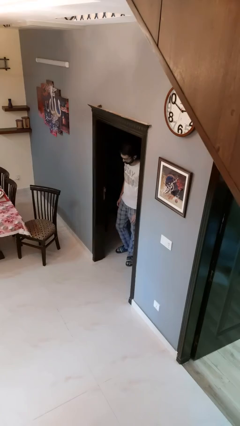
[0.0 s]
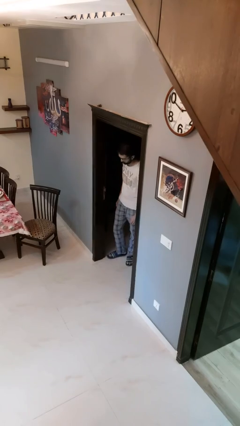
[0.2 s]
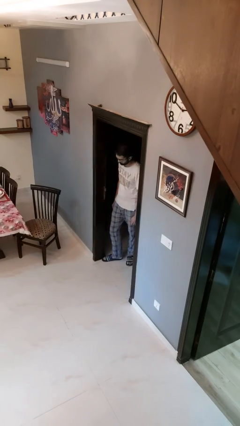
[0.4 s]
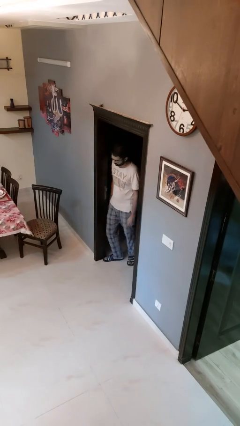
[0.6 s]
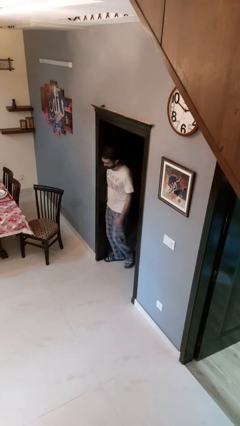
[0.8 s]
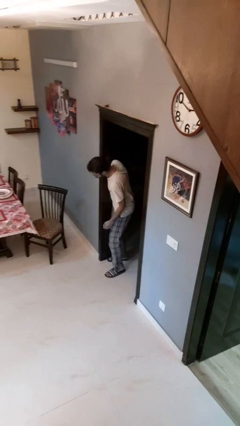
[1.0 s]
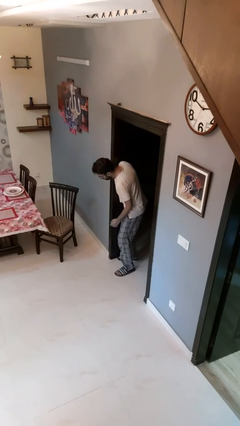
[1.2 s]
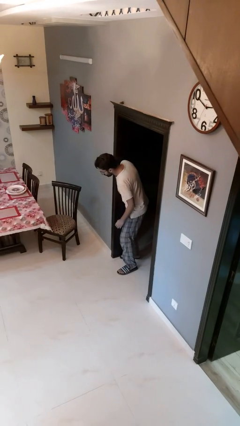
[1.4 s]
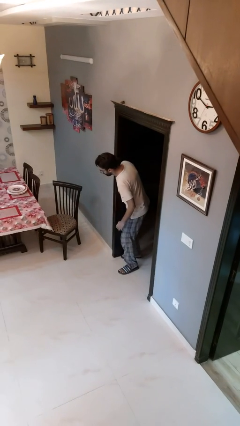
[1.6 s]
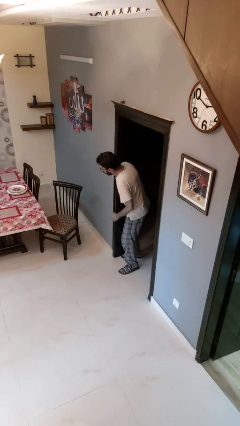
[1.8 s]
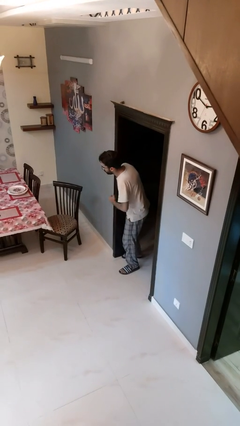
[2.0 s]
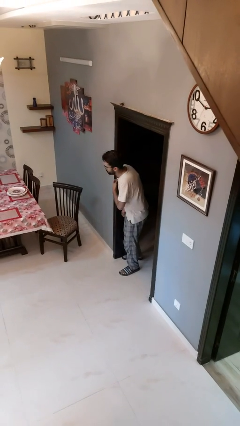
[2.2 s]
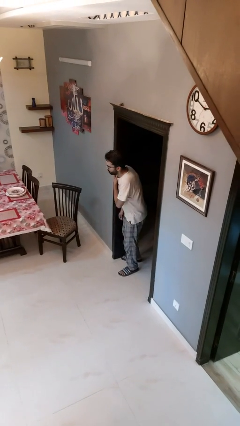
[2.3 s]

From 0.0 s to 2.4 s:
person bumps into wall

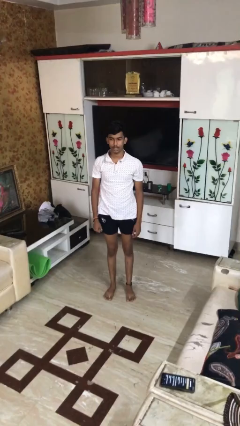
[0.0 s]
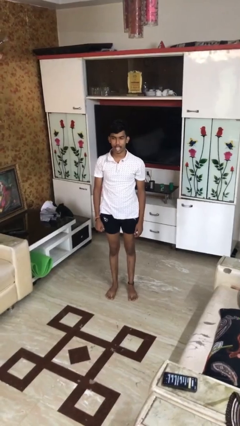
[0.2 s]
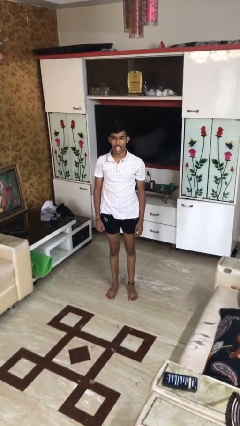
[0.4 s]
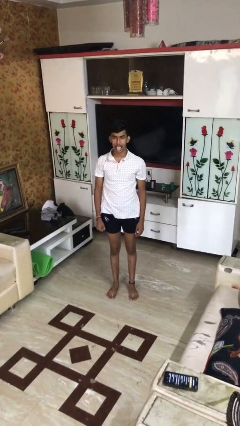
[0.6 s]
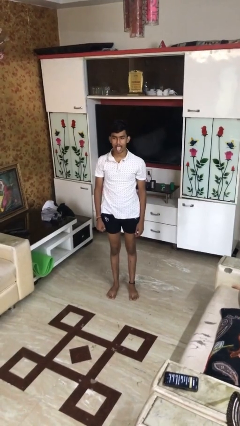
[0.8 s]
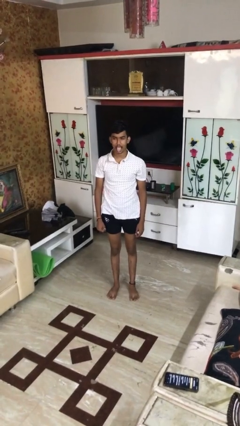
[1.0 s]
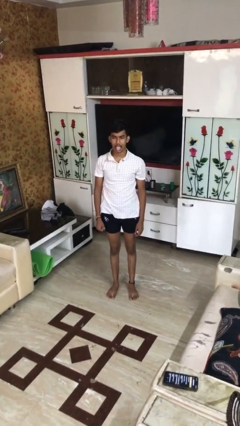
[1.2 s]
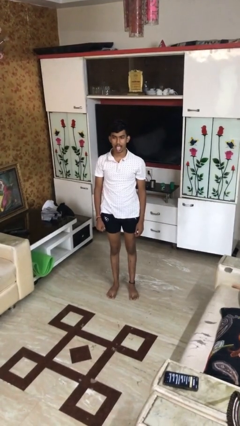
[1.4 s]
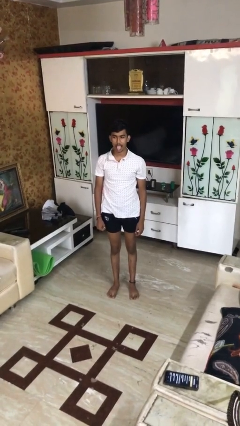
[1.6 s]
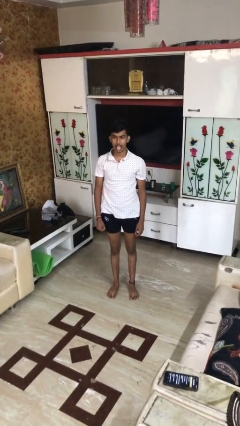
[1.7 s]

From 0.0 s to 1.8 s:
person sticks out tongue

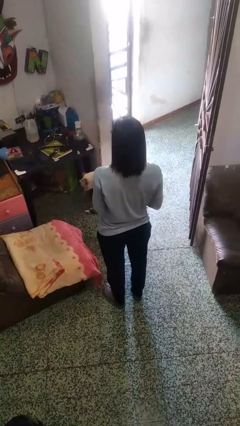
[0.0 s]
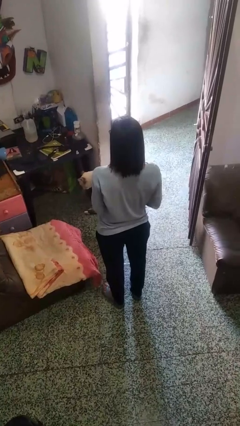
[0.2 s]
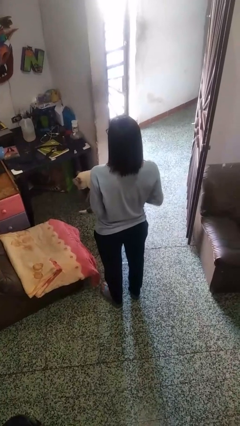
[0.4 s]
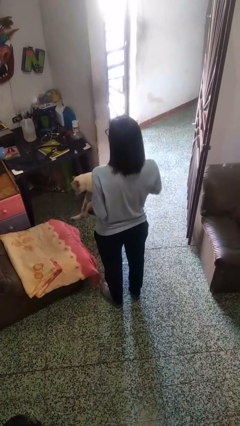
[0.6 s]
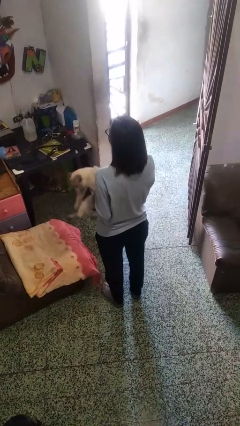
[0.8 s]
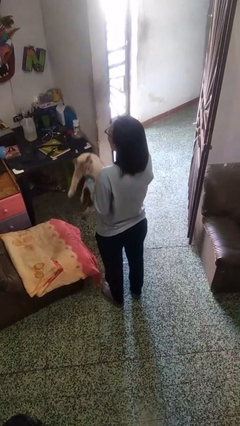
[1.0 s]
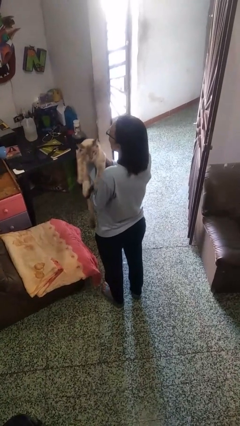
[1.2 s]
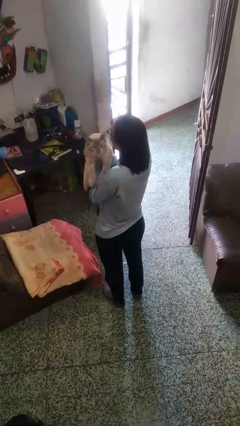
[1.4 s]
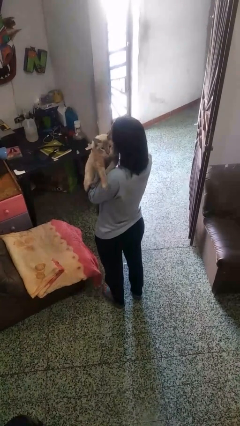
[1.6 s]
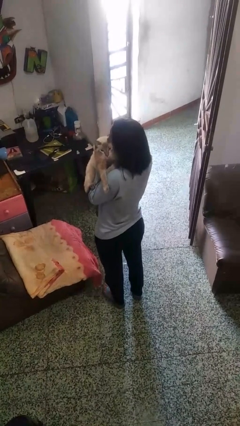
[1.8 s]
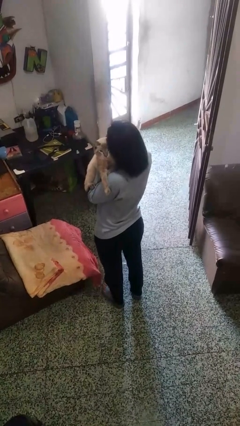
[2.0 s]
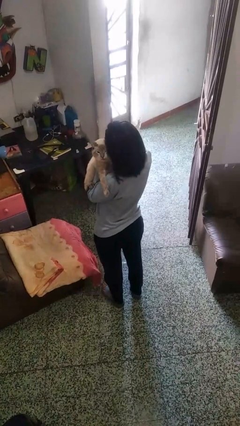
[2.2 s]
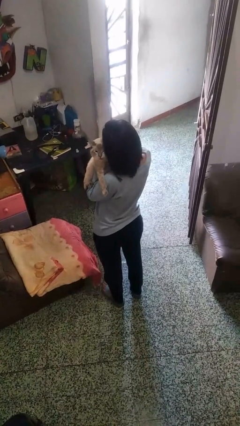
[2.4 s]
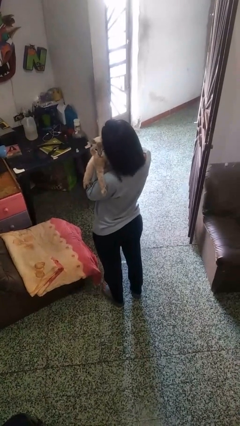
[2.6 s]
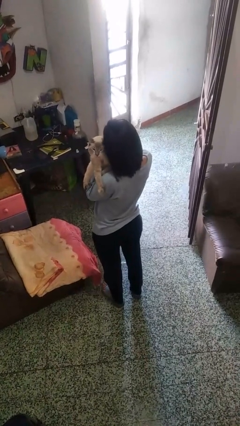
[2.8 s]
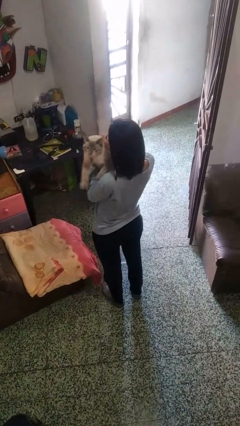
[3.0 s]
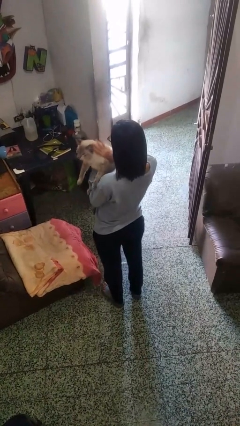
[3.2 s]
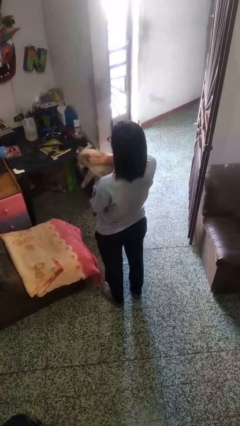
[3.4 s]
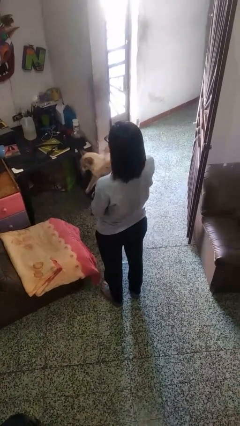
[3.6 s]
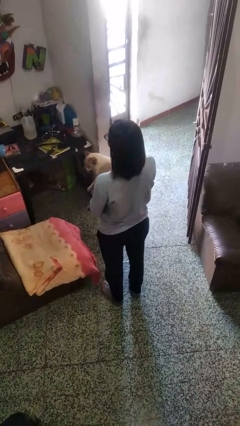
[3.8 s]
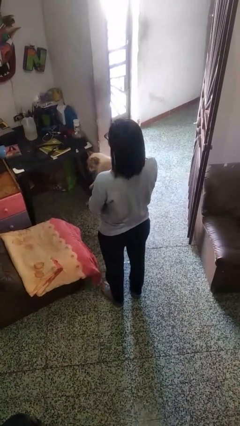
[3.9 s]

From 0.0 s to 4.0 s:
person hugs cat

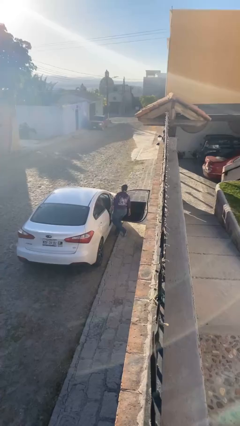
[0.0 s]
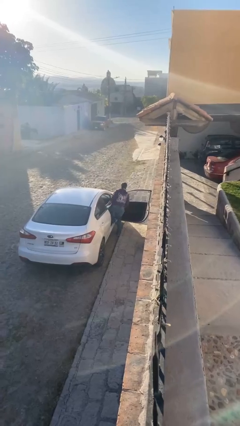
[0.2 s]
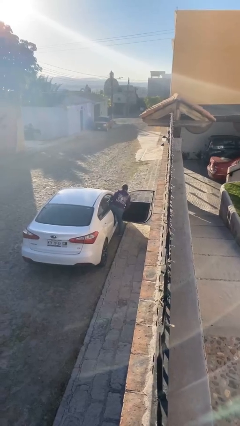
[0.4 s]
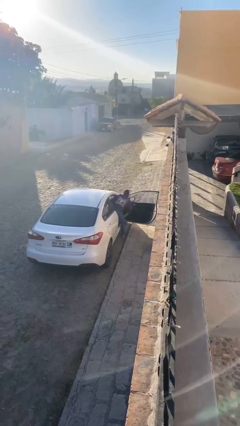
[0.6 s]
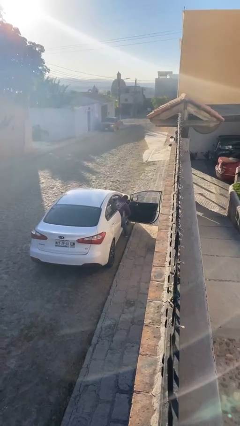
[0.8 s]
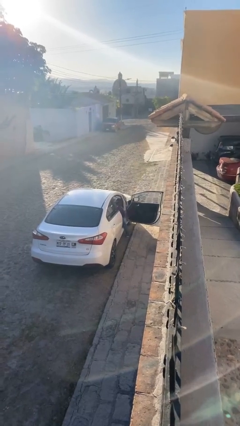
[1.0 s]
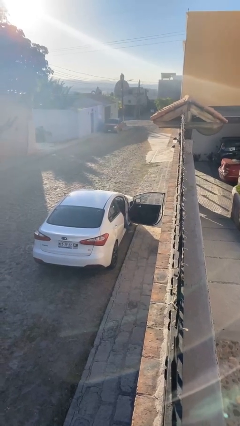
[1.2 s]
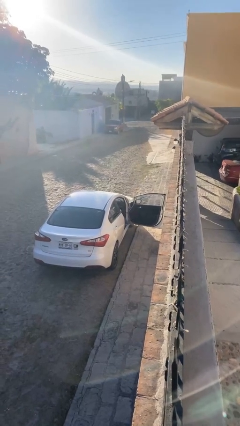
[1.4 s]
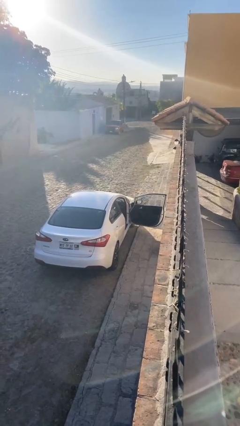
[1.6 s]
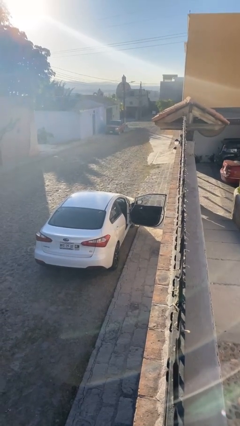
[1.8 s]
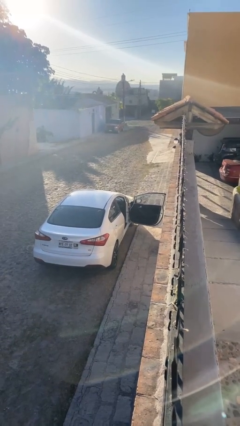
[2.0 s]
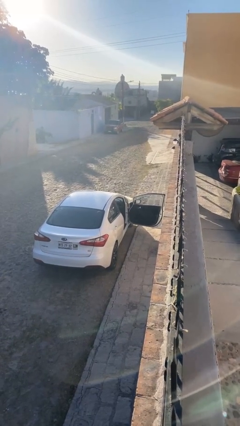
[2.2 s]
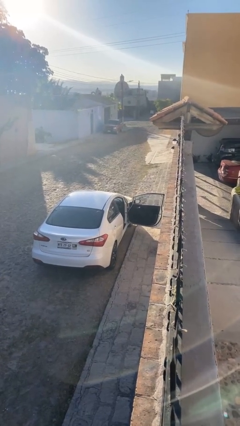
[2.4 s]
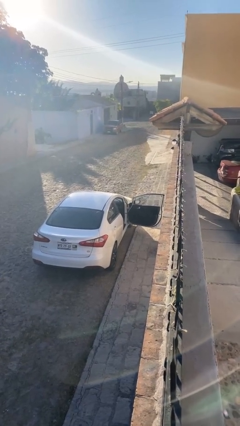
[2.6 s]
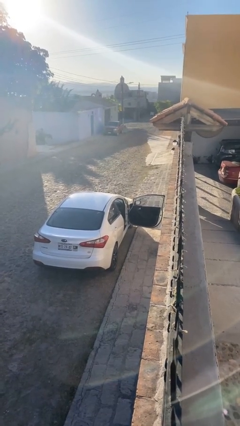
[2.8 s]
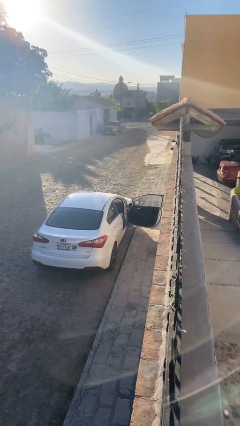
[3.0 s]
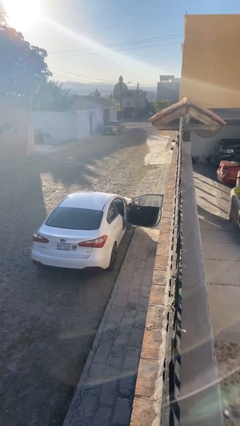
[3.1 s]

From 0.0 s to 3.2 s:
person enters car

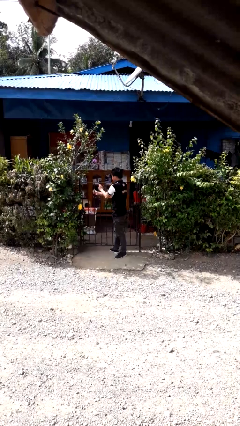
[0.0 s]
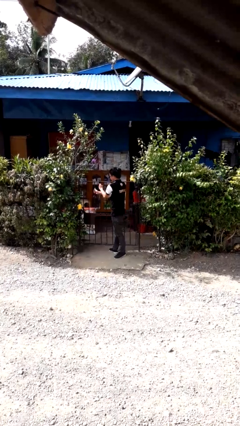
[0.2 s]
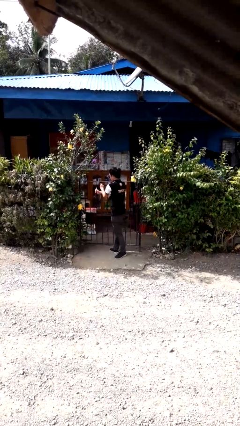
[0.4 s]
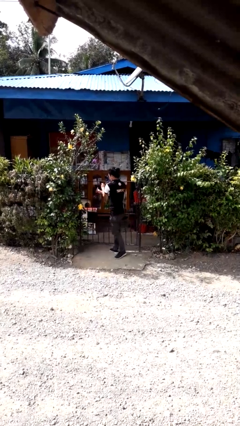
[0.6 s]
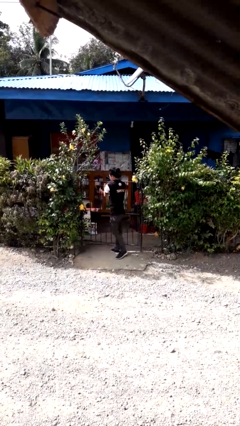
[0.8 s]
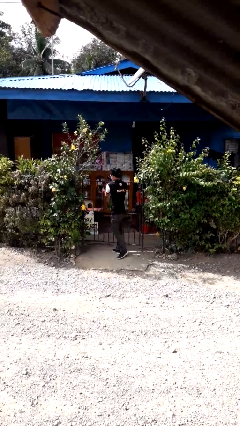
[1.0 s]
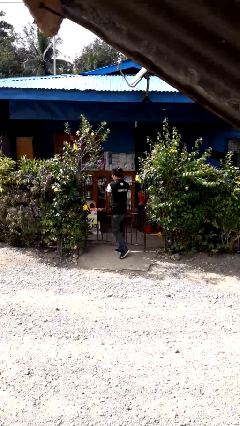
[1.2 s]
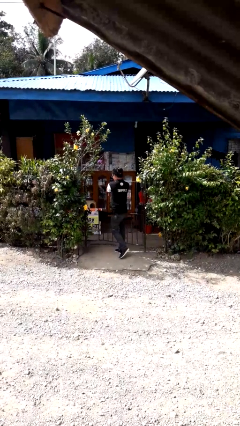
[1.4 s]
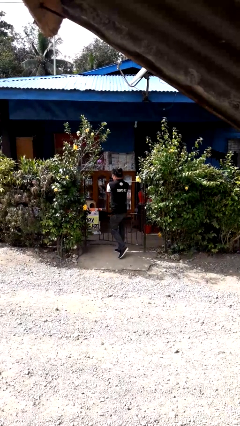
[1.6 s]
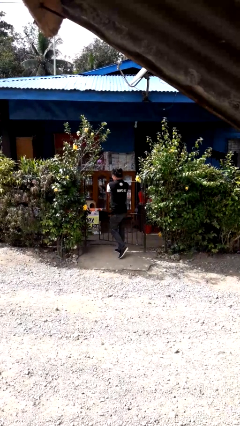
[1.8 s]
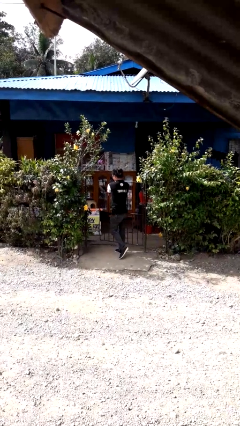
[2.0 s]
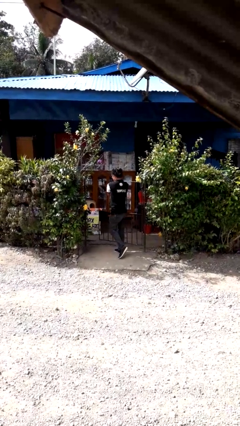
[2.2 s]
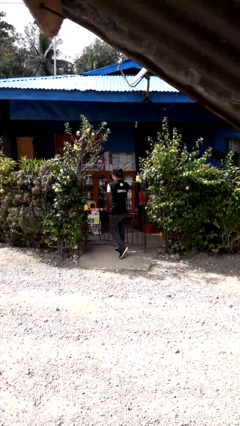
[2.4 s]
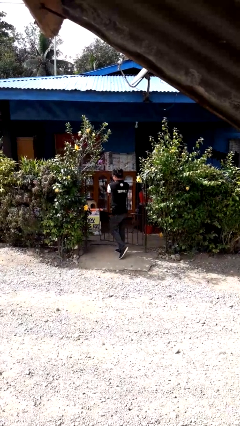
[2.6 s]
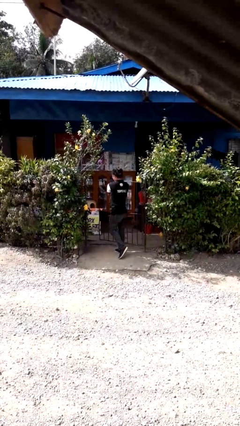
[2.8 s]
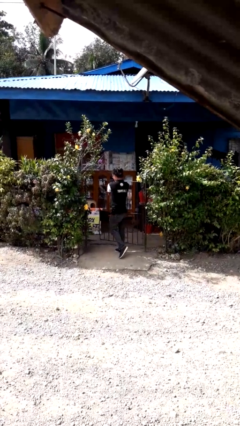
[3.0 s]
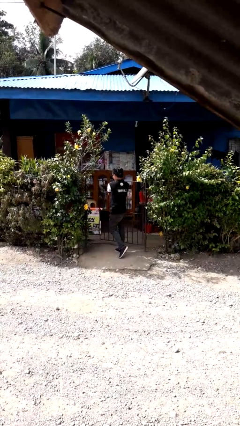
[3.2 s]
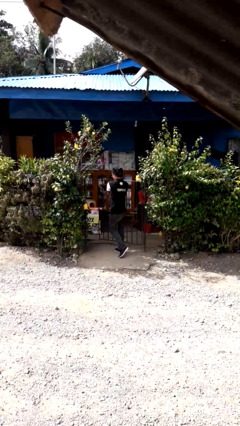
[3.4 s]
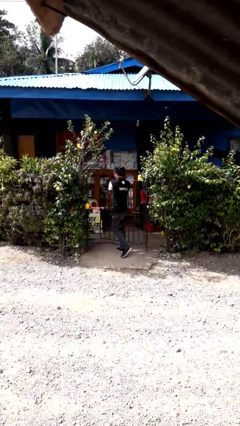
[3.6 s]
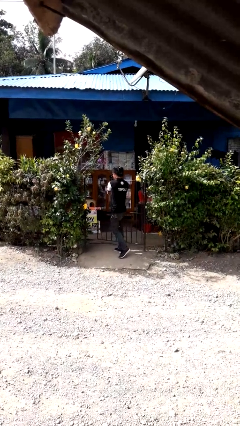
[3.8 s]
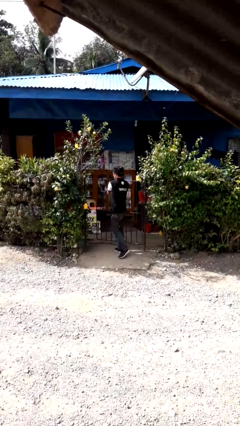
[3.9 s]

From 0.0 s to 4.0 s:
person opens gate

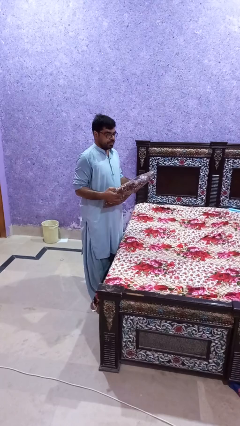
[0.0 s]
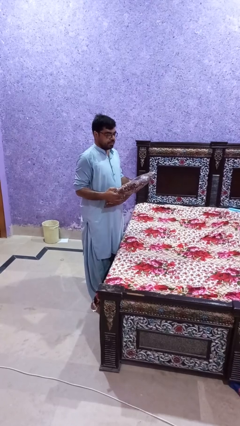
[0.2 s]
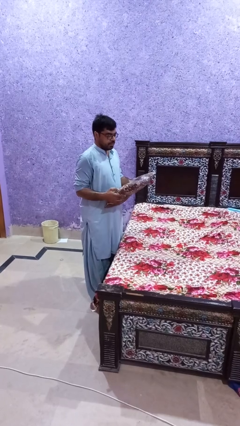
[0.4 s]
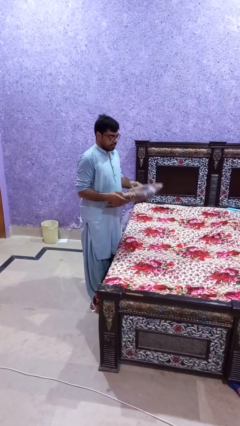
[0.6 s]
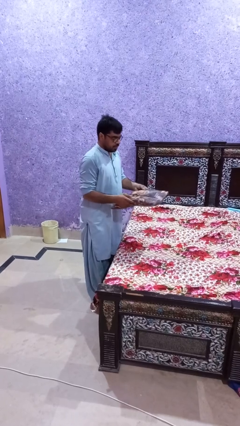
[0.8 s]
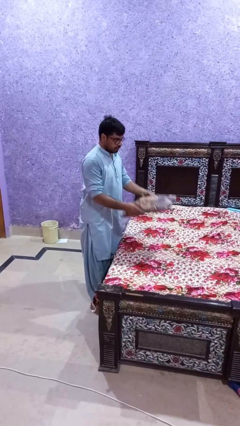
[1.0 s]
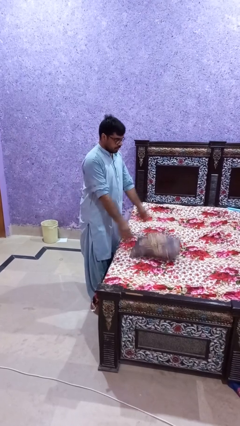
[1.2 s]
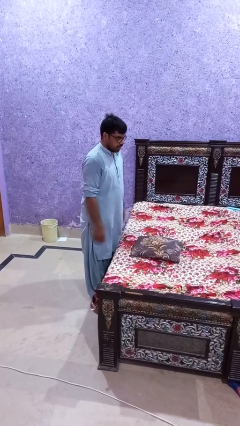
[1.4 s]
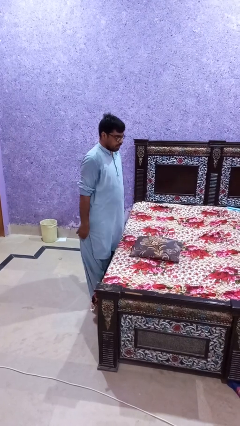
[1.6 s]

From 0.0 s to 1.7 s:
person puts down object on bed

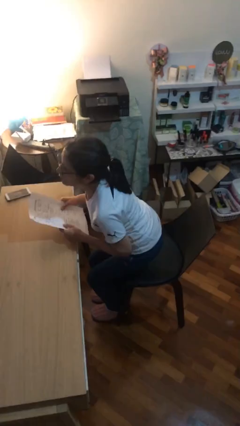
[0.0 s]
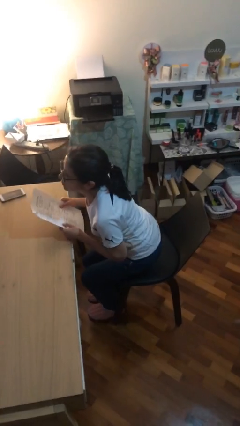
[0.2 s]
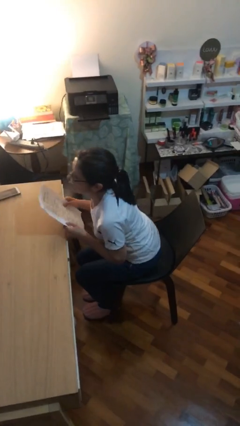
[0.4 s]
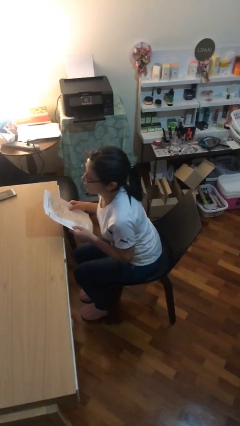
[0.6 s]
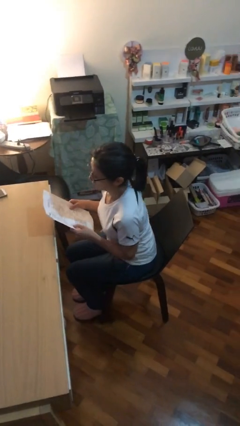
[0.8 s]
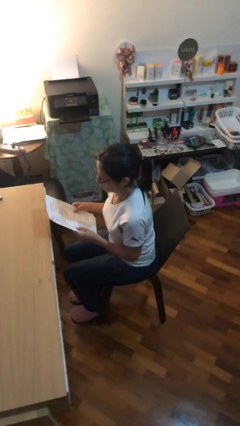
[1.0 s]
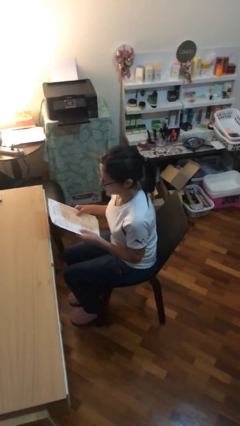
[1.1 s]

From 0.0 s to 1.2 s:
person sits down
